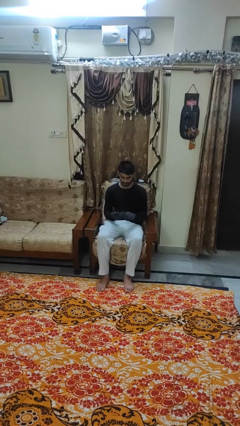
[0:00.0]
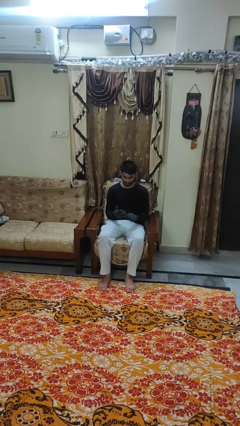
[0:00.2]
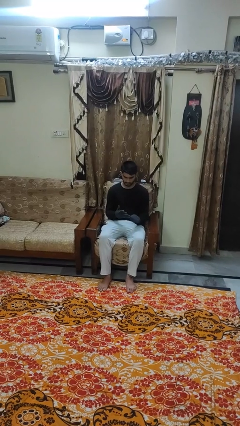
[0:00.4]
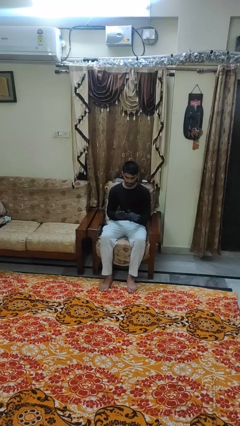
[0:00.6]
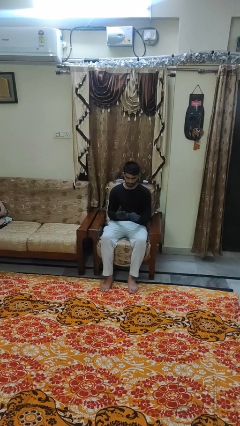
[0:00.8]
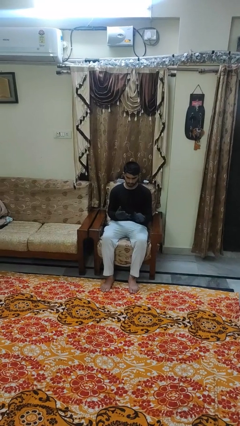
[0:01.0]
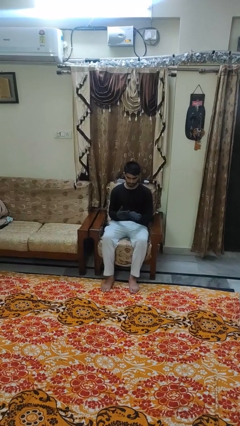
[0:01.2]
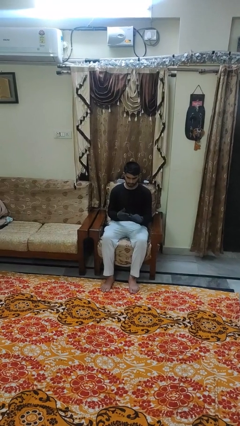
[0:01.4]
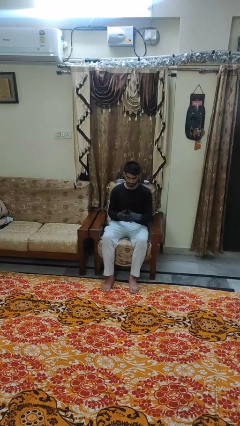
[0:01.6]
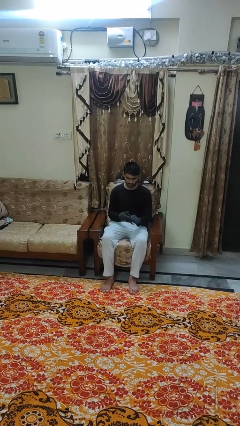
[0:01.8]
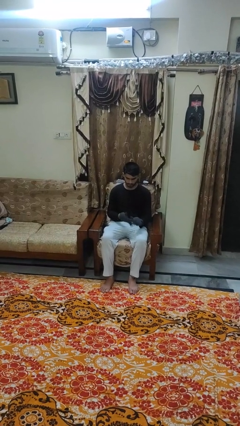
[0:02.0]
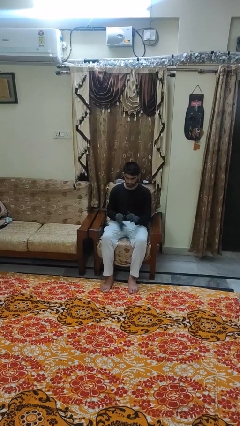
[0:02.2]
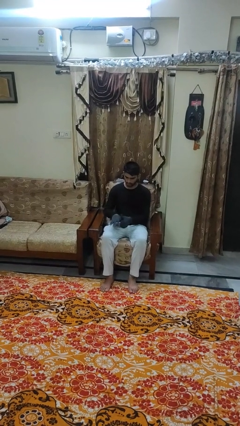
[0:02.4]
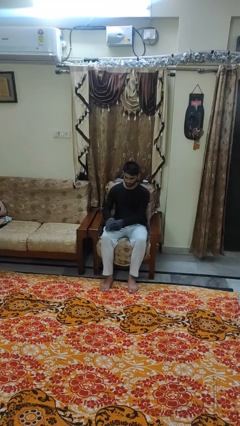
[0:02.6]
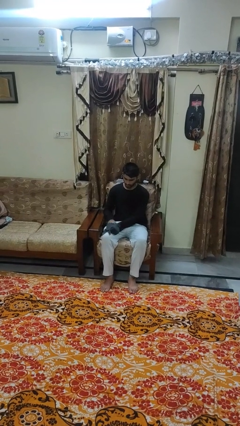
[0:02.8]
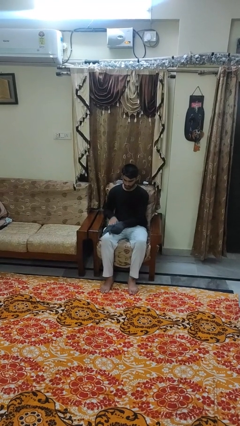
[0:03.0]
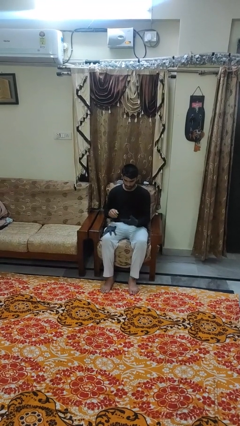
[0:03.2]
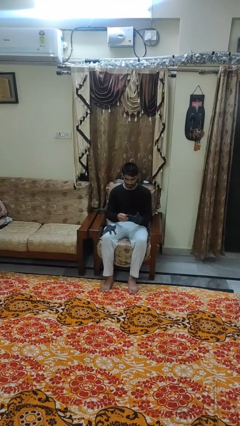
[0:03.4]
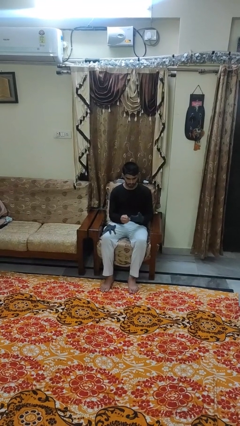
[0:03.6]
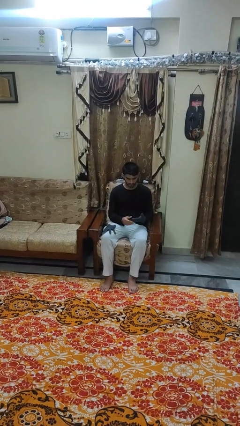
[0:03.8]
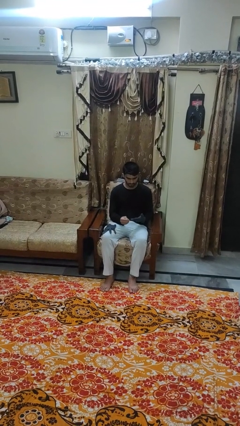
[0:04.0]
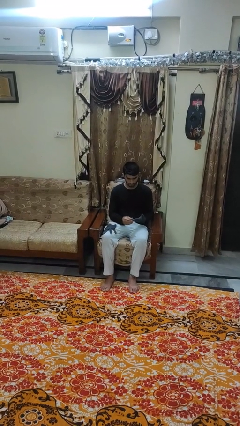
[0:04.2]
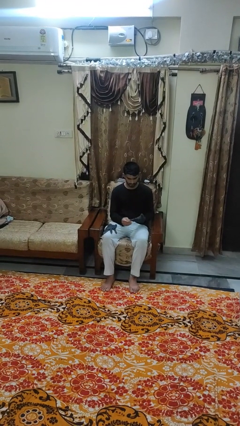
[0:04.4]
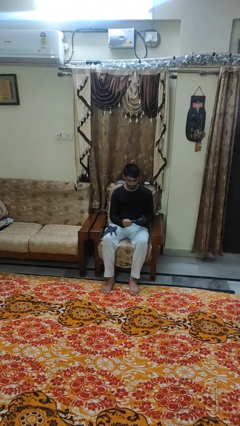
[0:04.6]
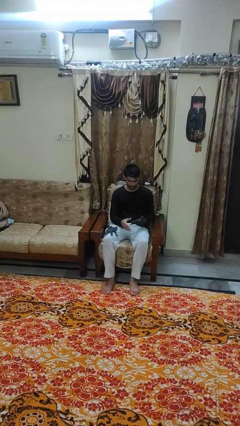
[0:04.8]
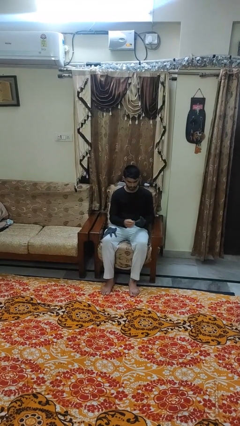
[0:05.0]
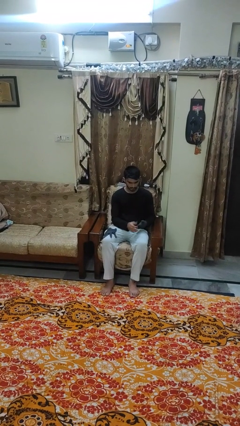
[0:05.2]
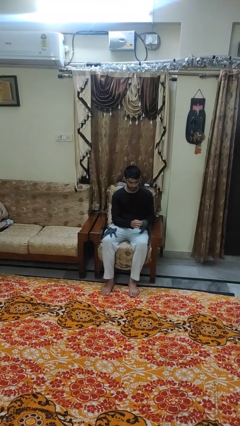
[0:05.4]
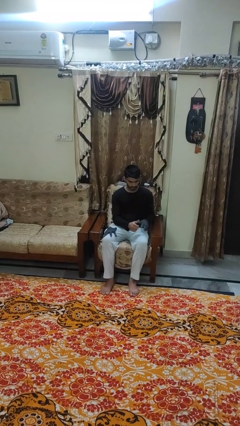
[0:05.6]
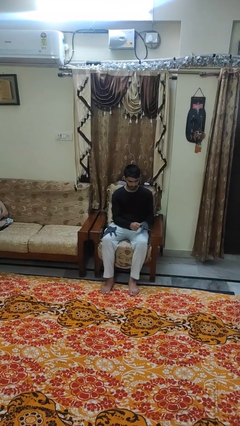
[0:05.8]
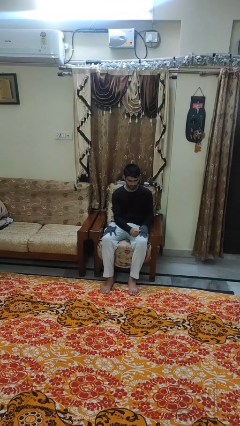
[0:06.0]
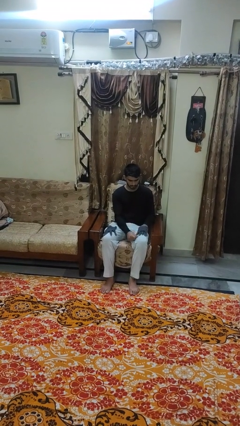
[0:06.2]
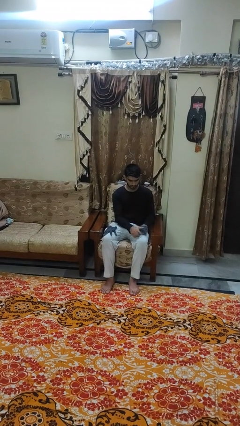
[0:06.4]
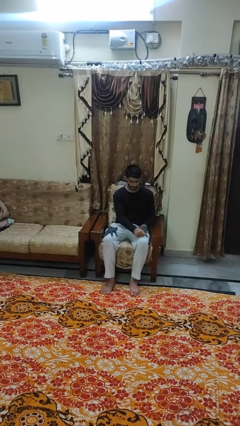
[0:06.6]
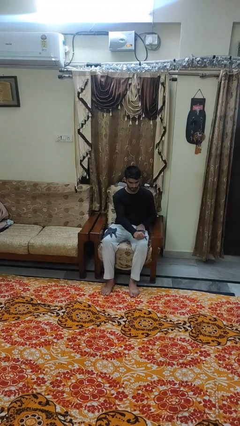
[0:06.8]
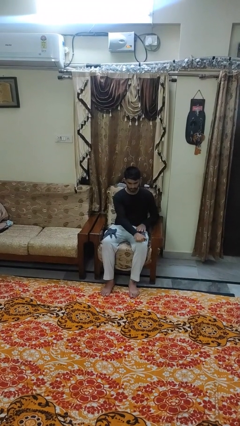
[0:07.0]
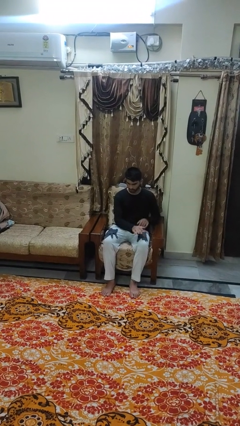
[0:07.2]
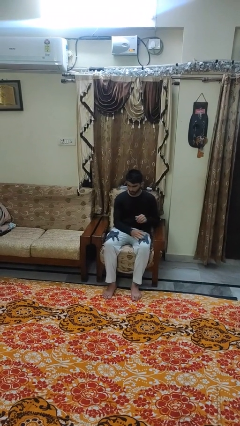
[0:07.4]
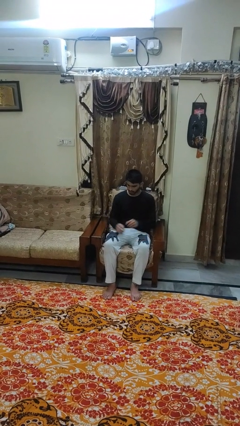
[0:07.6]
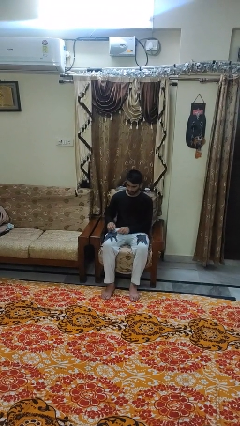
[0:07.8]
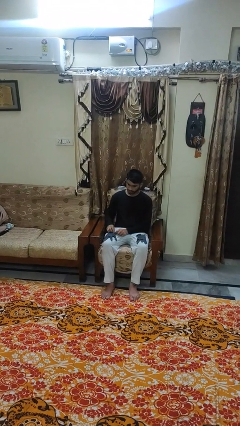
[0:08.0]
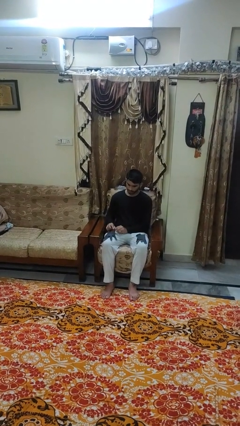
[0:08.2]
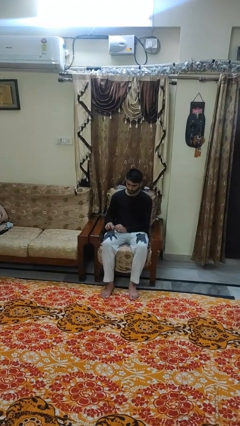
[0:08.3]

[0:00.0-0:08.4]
person takes off gloves

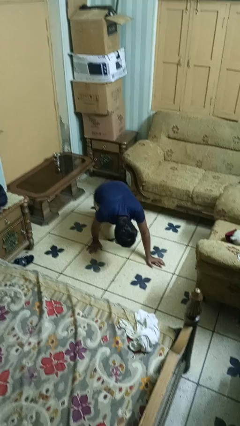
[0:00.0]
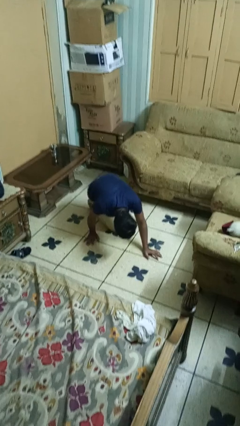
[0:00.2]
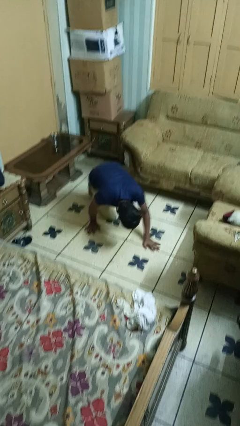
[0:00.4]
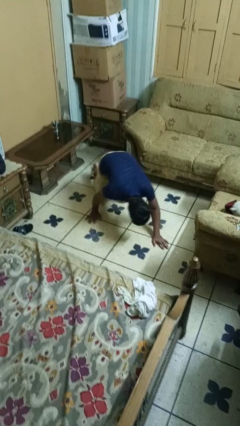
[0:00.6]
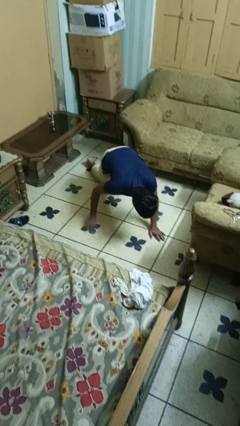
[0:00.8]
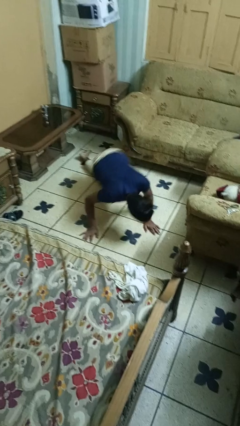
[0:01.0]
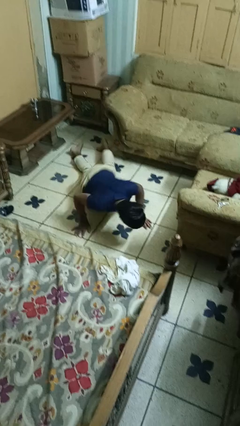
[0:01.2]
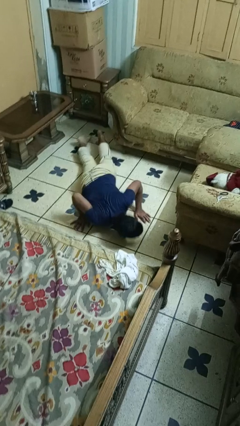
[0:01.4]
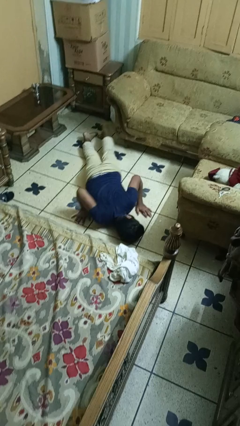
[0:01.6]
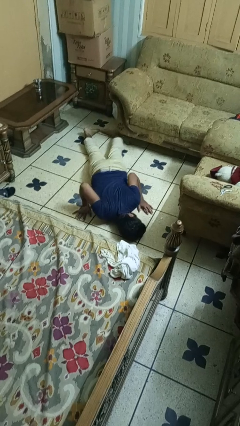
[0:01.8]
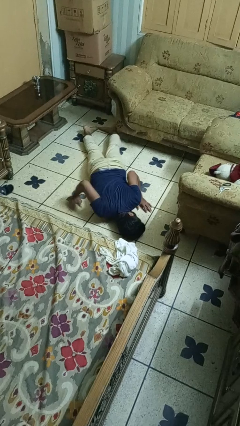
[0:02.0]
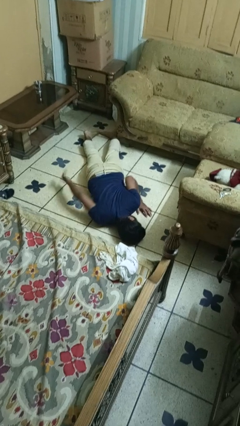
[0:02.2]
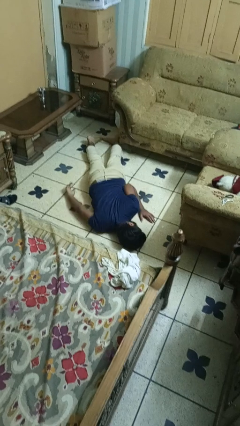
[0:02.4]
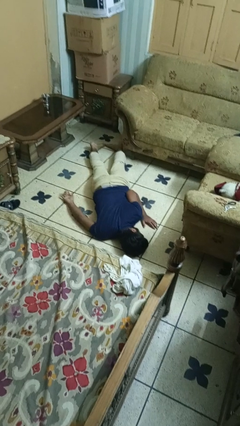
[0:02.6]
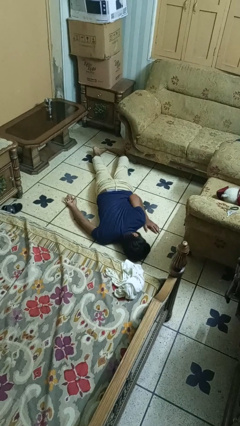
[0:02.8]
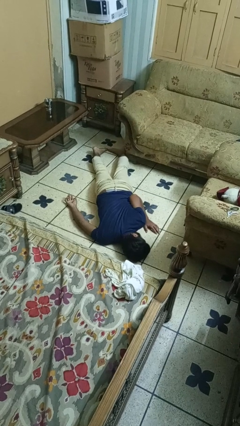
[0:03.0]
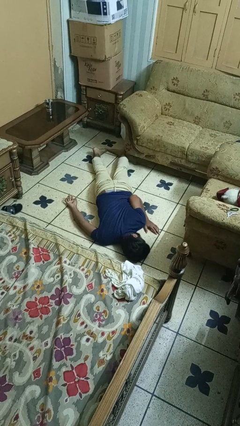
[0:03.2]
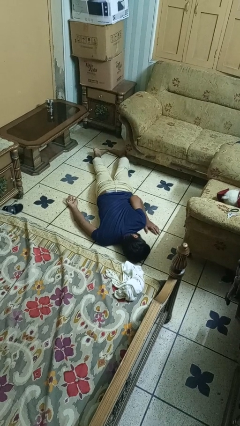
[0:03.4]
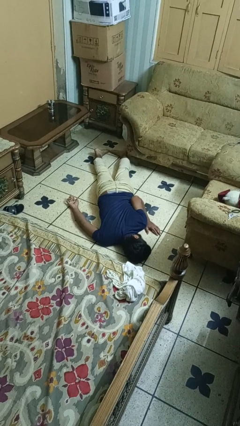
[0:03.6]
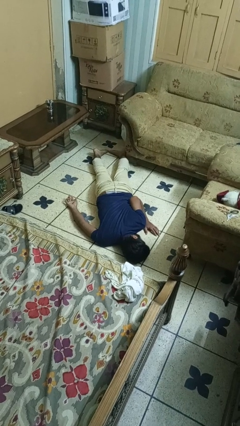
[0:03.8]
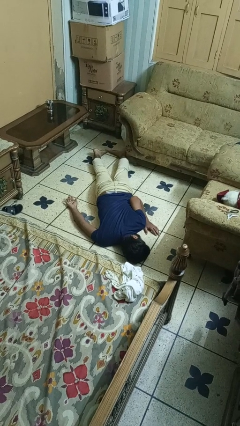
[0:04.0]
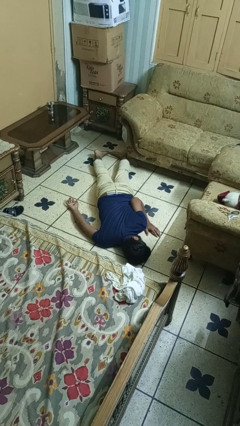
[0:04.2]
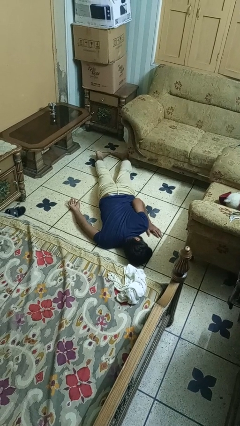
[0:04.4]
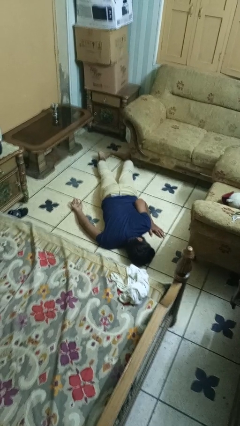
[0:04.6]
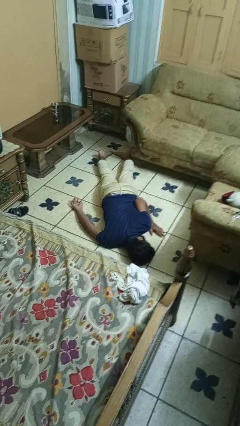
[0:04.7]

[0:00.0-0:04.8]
person lies down on floor

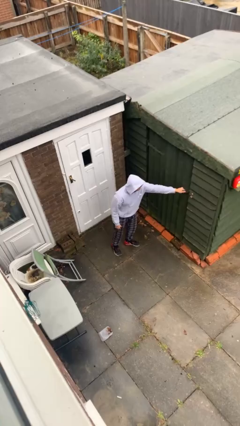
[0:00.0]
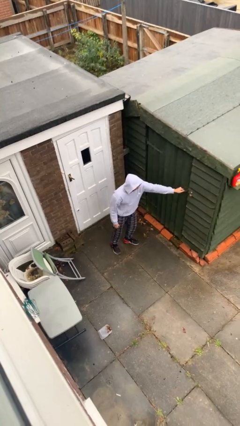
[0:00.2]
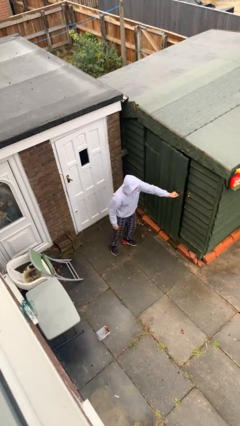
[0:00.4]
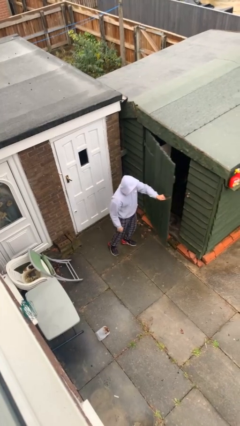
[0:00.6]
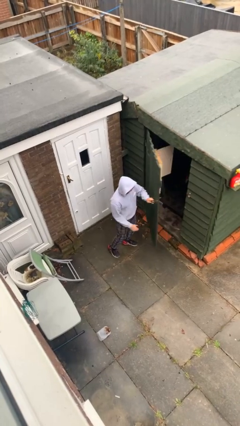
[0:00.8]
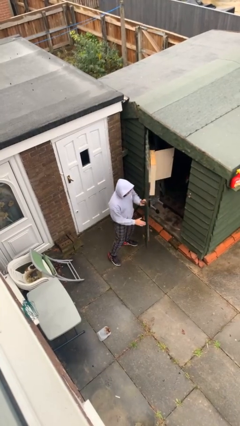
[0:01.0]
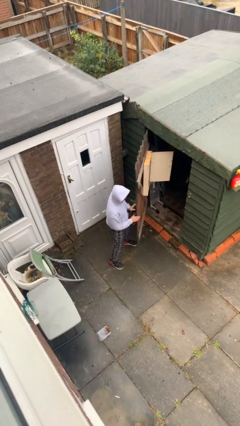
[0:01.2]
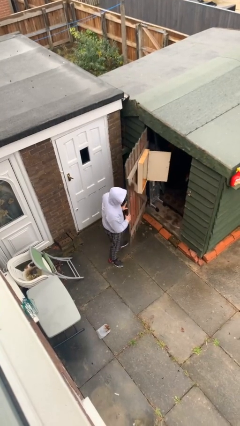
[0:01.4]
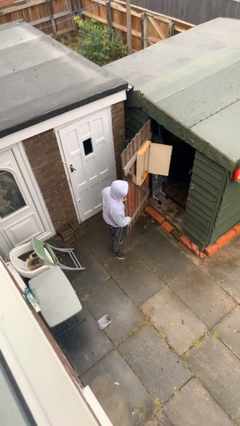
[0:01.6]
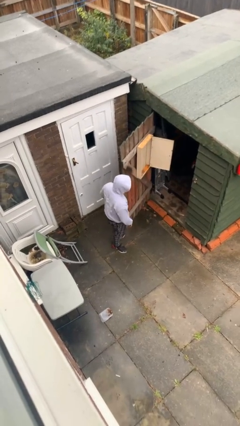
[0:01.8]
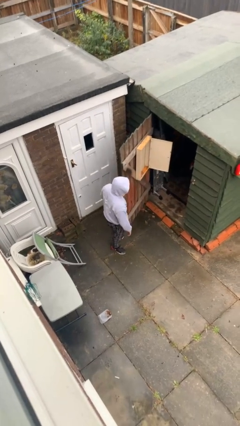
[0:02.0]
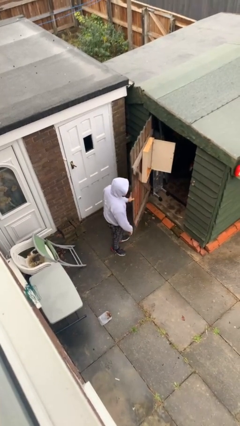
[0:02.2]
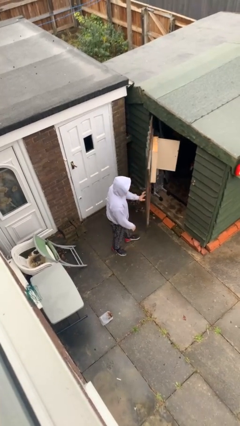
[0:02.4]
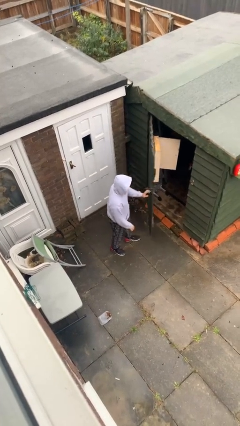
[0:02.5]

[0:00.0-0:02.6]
person opens facility door

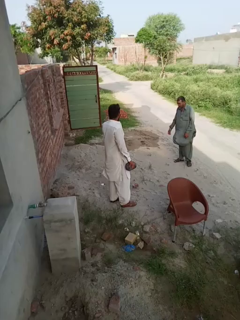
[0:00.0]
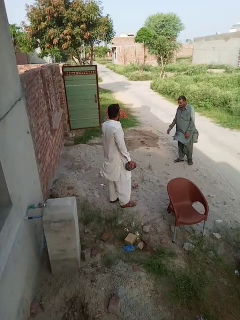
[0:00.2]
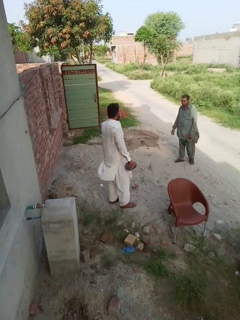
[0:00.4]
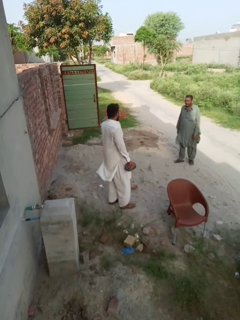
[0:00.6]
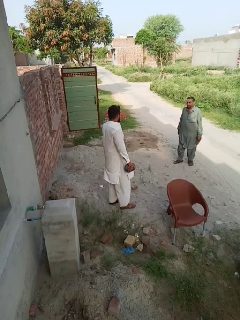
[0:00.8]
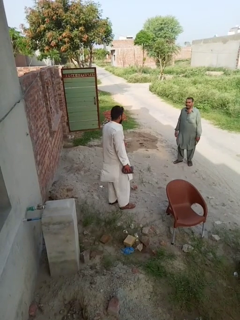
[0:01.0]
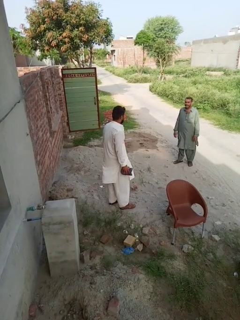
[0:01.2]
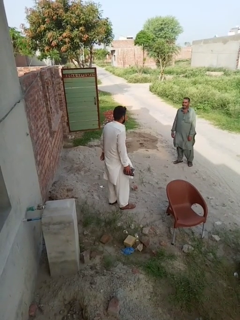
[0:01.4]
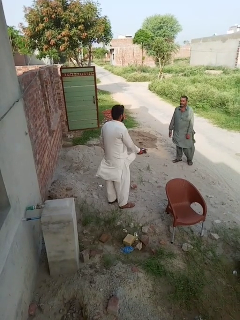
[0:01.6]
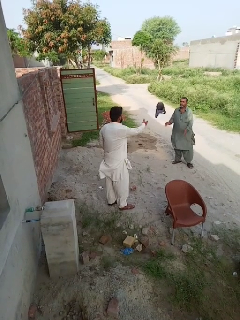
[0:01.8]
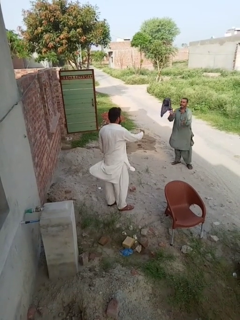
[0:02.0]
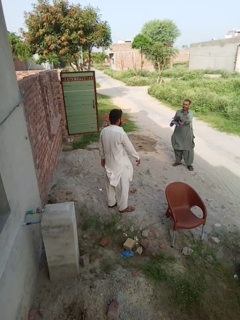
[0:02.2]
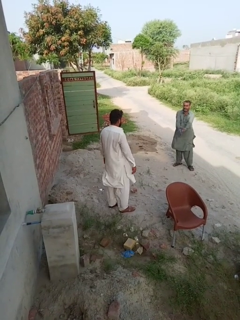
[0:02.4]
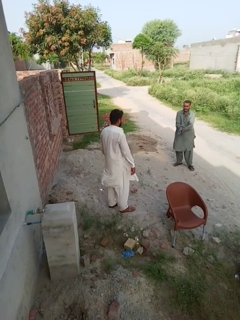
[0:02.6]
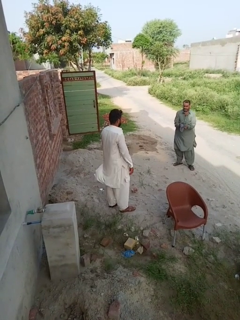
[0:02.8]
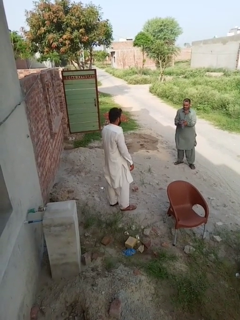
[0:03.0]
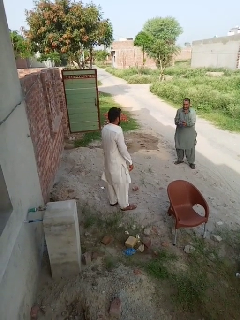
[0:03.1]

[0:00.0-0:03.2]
person throws object to person
